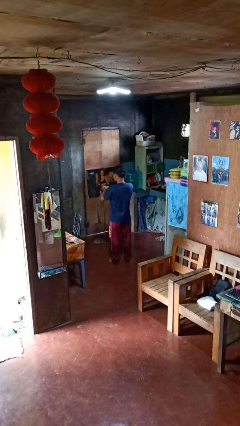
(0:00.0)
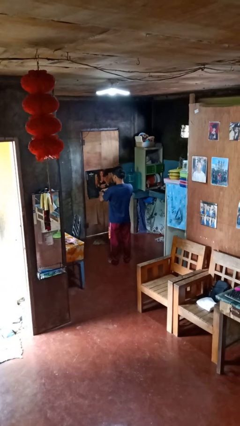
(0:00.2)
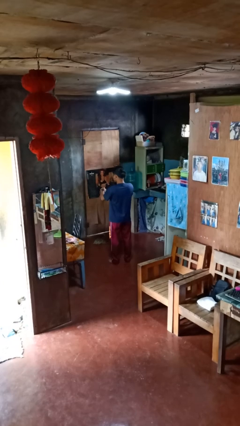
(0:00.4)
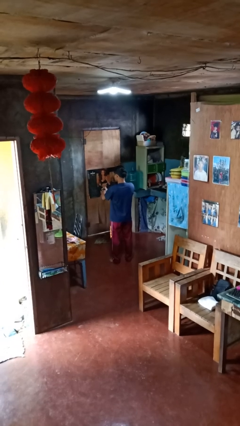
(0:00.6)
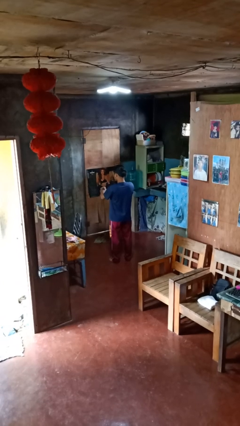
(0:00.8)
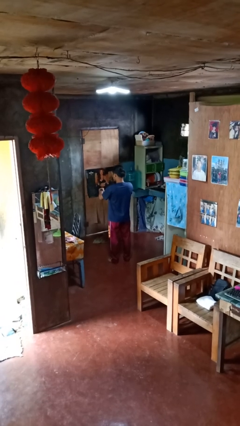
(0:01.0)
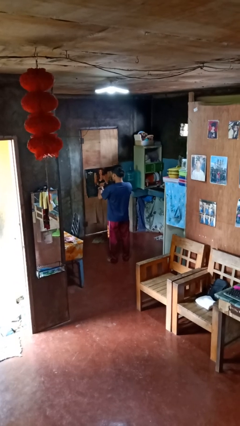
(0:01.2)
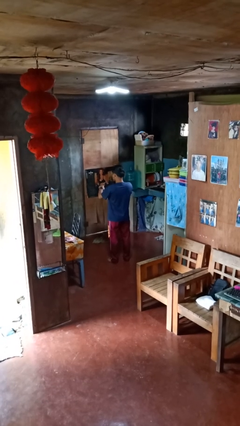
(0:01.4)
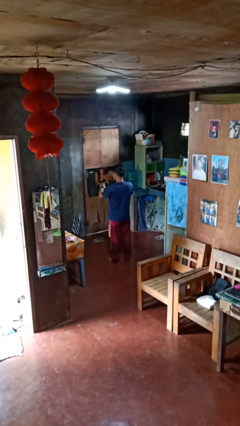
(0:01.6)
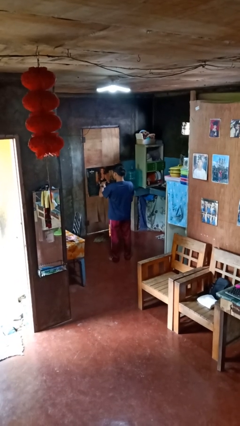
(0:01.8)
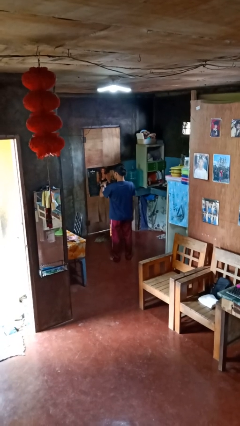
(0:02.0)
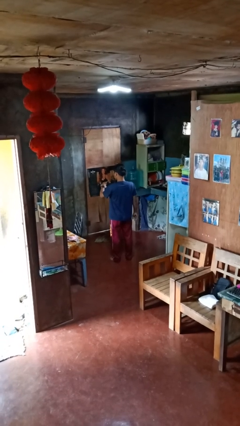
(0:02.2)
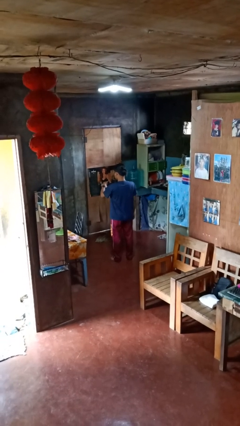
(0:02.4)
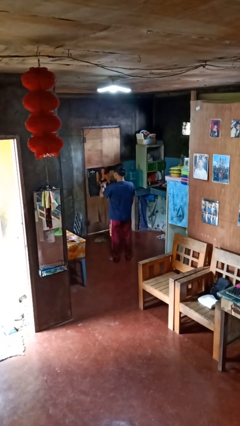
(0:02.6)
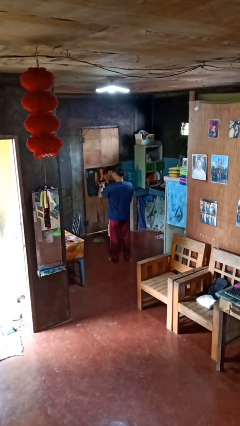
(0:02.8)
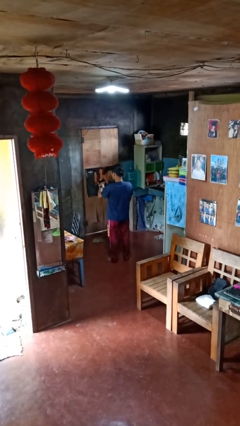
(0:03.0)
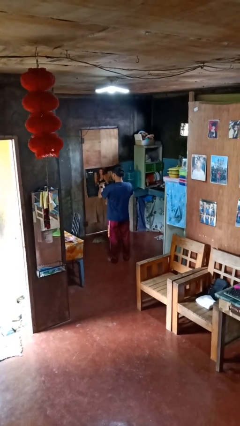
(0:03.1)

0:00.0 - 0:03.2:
person puts on wristwatch

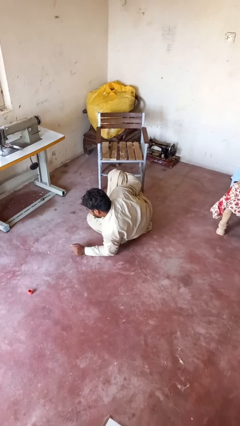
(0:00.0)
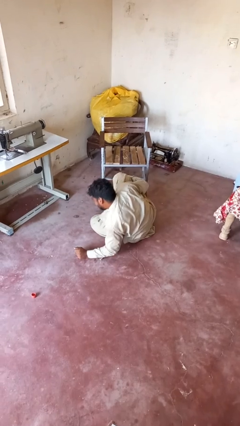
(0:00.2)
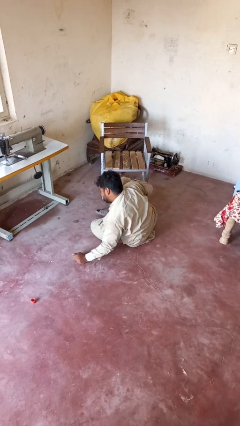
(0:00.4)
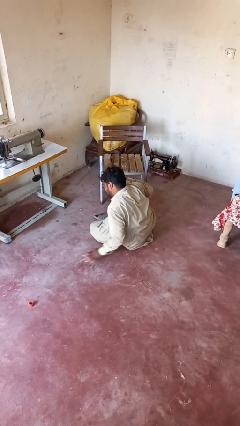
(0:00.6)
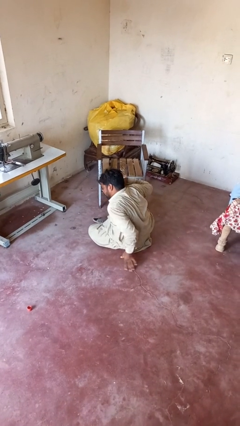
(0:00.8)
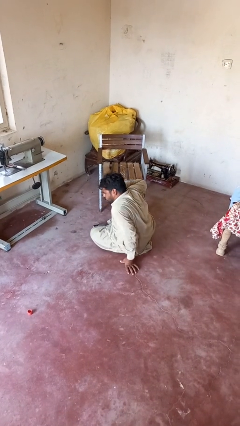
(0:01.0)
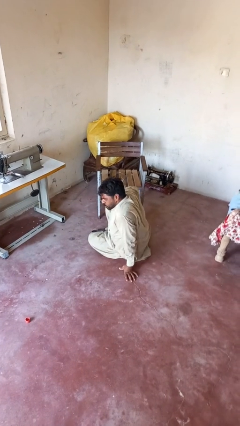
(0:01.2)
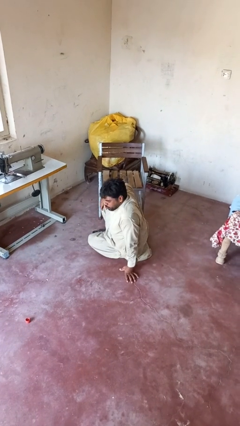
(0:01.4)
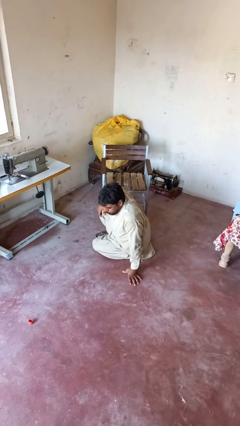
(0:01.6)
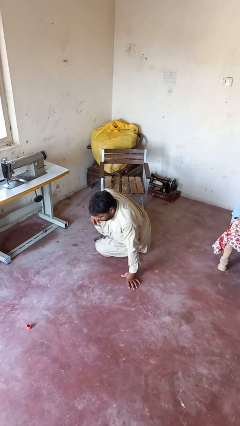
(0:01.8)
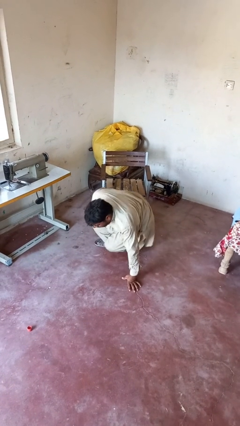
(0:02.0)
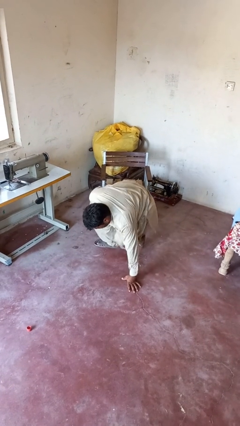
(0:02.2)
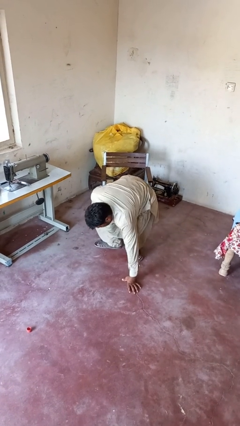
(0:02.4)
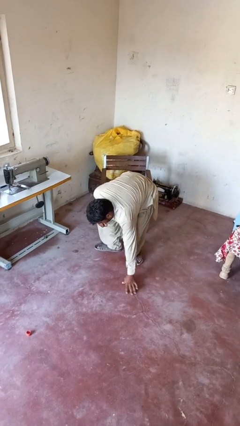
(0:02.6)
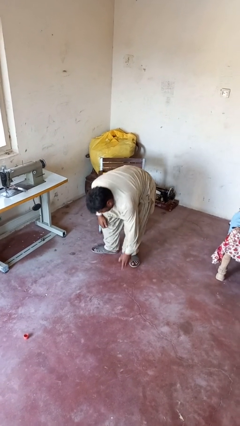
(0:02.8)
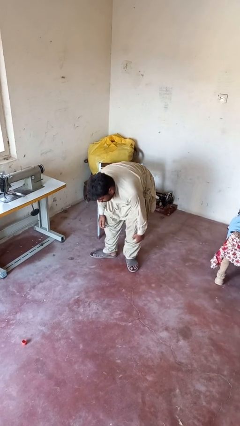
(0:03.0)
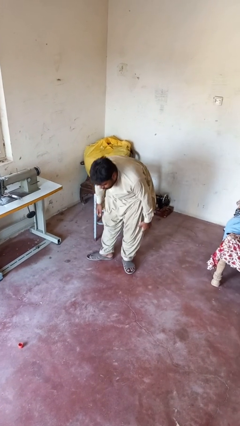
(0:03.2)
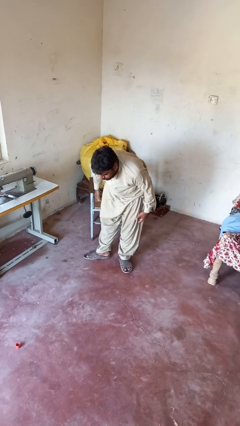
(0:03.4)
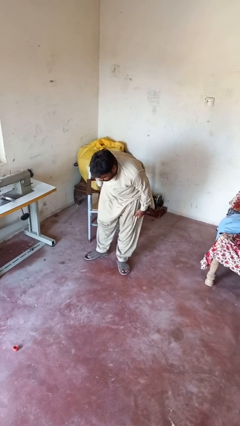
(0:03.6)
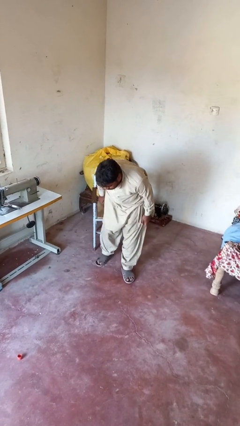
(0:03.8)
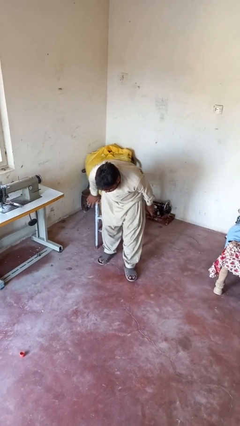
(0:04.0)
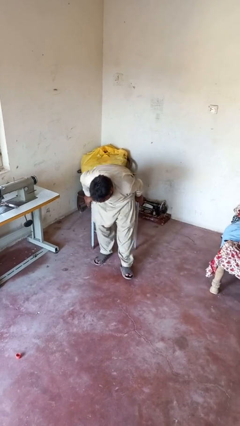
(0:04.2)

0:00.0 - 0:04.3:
person stands up from floor

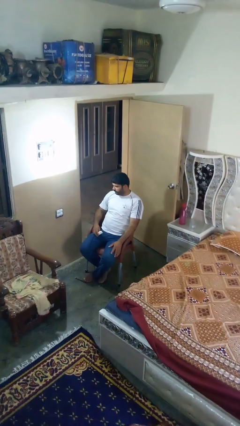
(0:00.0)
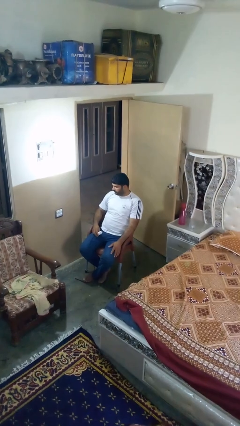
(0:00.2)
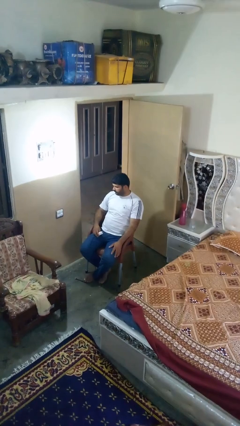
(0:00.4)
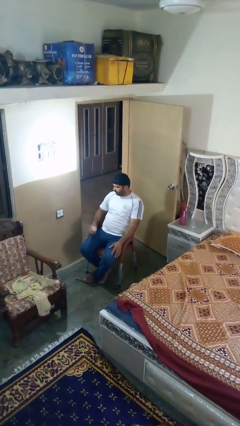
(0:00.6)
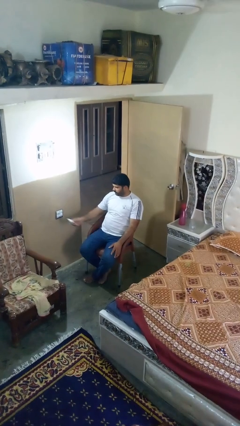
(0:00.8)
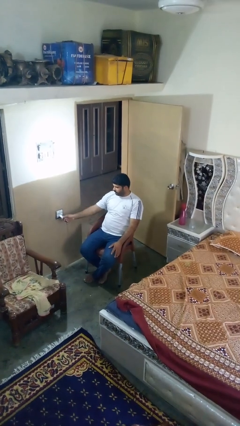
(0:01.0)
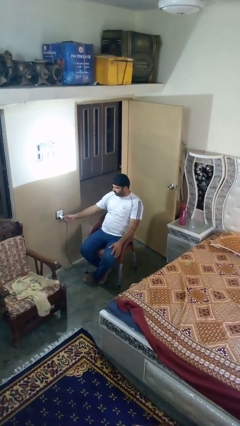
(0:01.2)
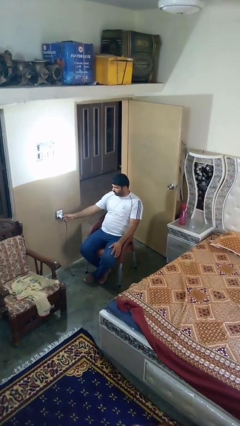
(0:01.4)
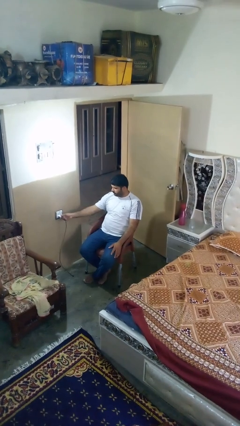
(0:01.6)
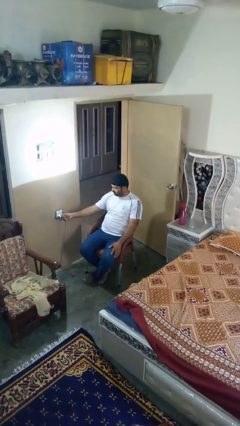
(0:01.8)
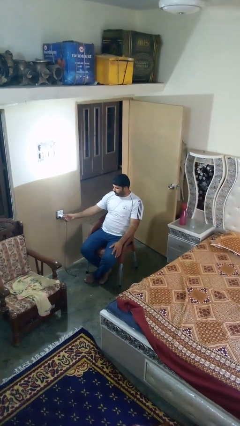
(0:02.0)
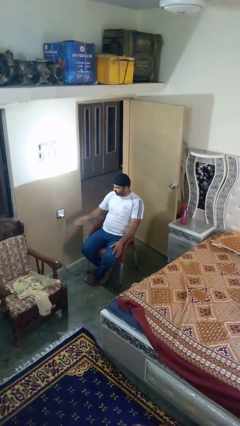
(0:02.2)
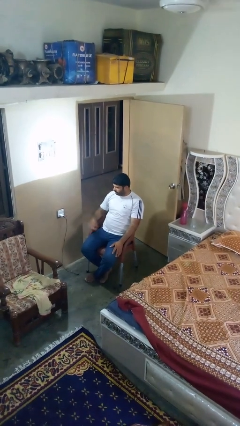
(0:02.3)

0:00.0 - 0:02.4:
person plugs into electrical socket

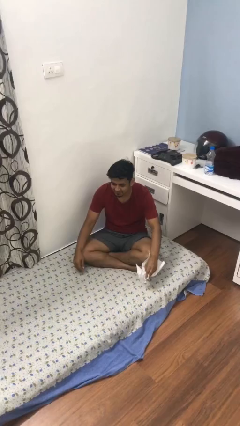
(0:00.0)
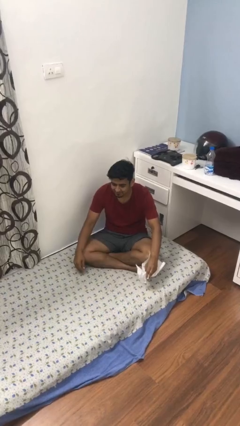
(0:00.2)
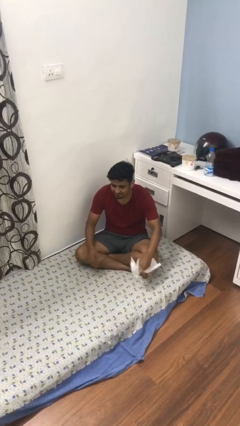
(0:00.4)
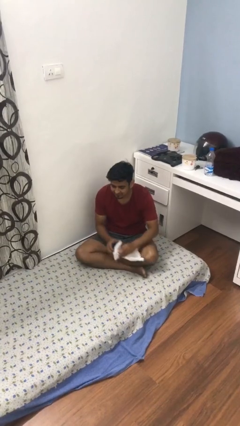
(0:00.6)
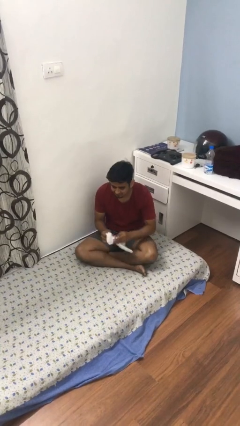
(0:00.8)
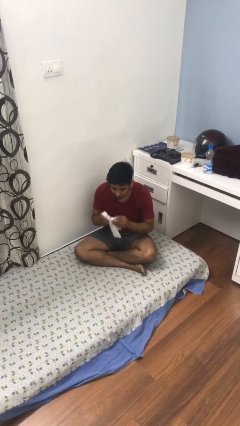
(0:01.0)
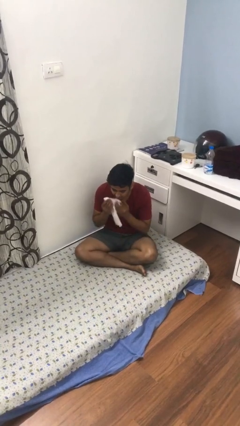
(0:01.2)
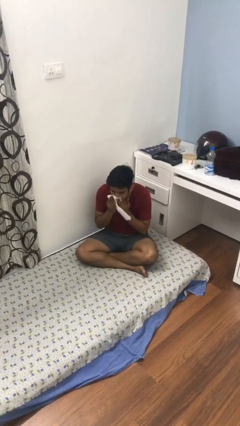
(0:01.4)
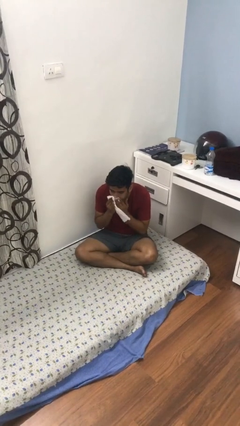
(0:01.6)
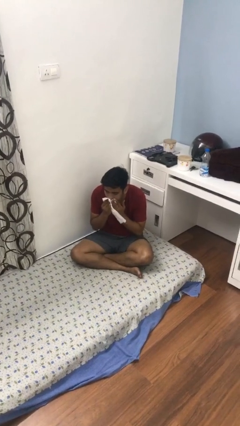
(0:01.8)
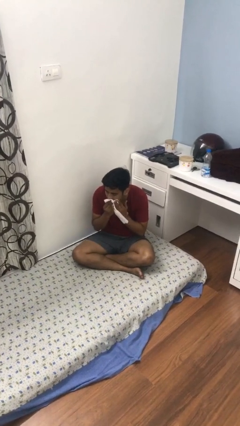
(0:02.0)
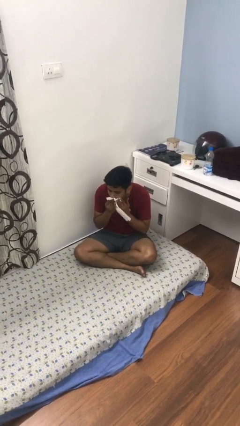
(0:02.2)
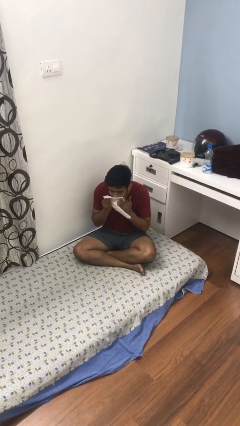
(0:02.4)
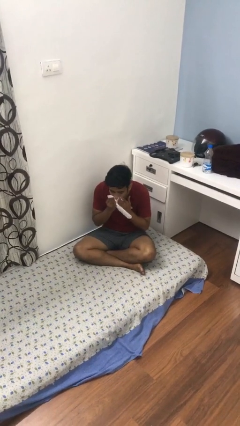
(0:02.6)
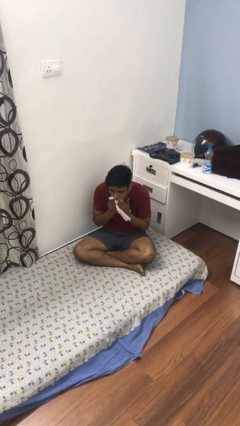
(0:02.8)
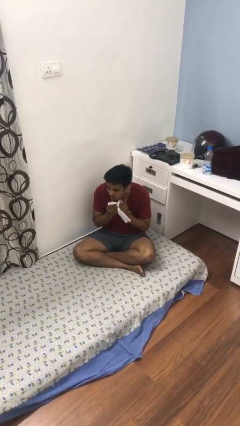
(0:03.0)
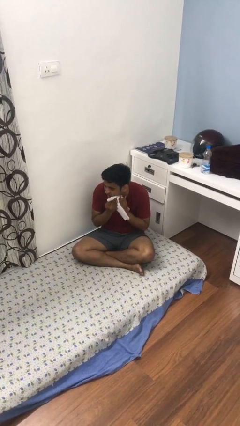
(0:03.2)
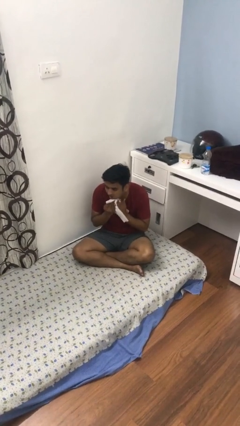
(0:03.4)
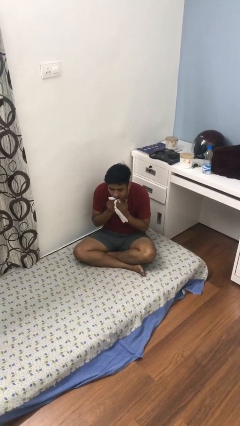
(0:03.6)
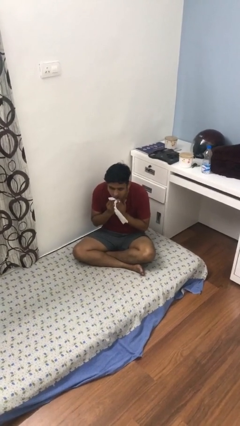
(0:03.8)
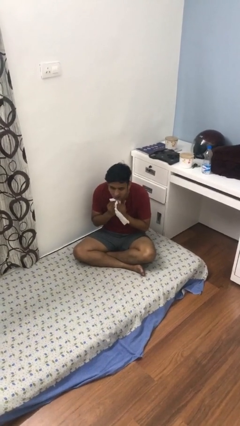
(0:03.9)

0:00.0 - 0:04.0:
person wipes mouth with napkin

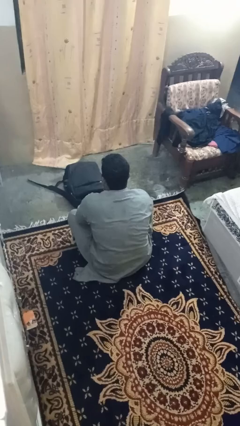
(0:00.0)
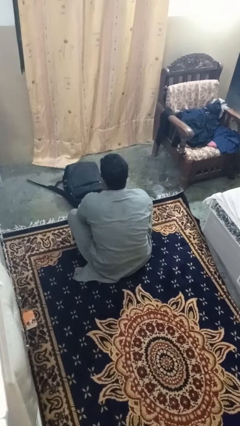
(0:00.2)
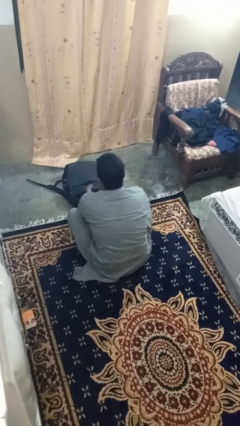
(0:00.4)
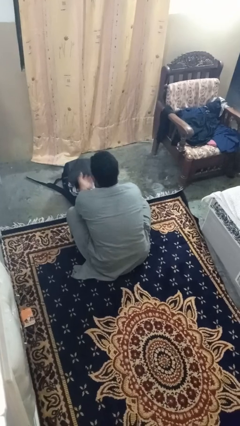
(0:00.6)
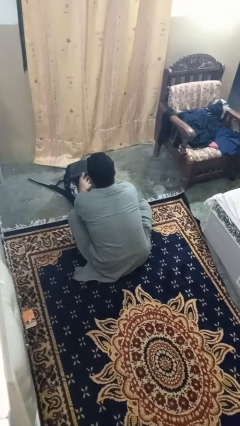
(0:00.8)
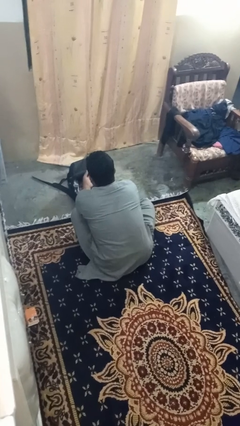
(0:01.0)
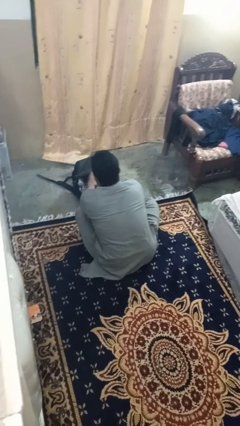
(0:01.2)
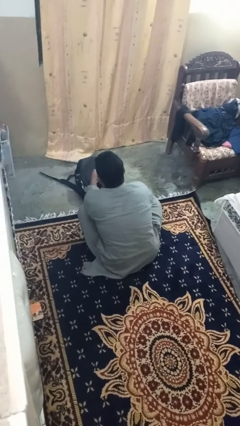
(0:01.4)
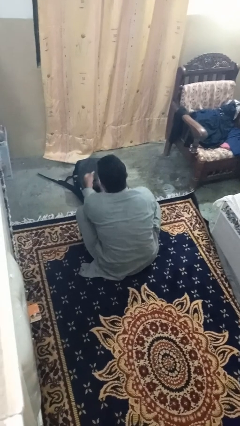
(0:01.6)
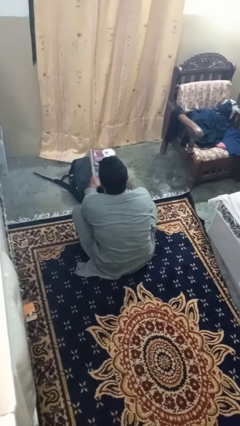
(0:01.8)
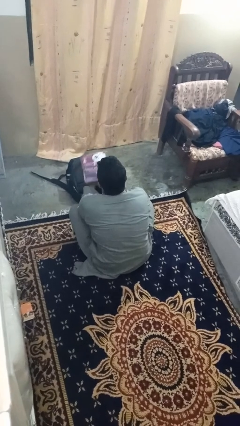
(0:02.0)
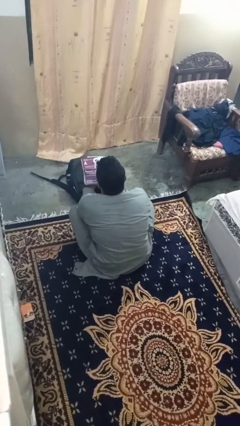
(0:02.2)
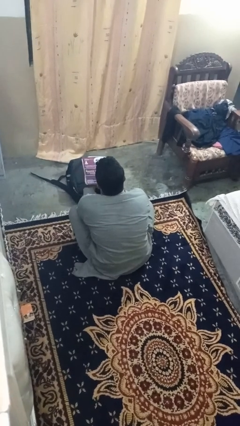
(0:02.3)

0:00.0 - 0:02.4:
person takes object from bag

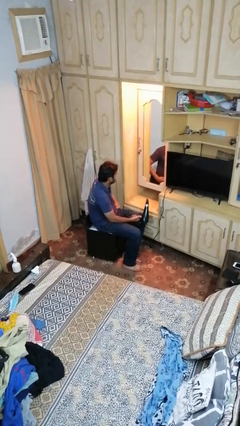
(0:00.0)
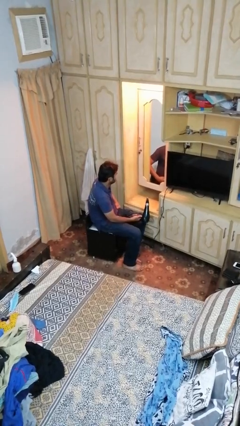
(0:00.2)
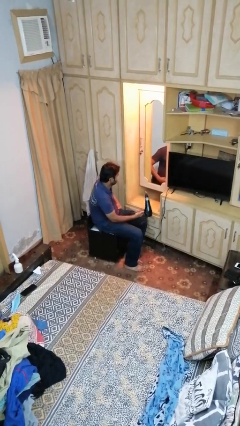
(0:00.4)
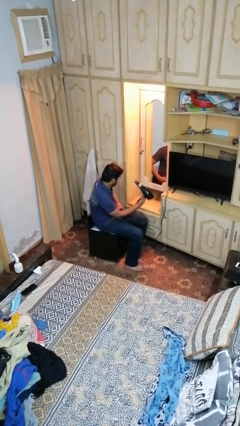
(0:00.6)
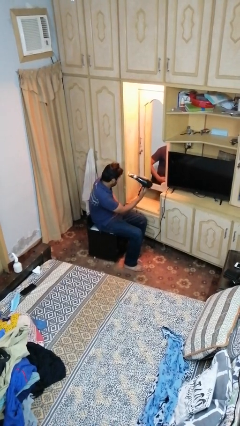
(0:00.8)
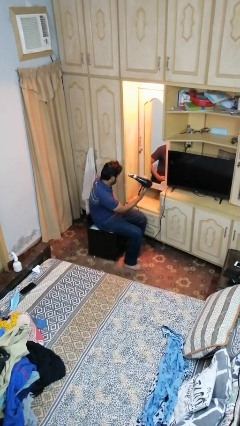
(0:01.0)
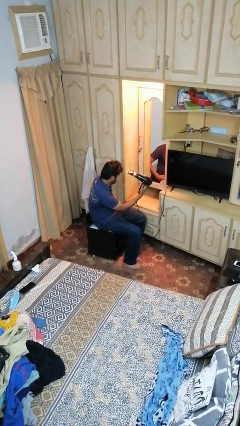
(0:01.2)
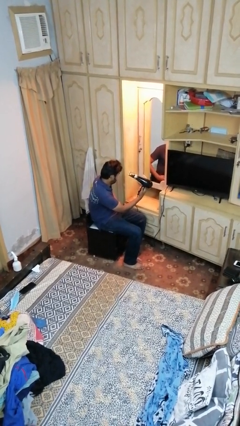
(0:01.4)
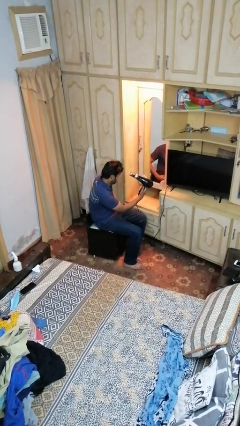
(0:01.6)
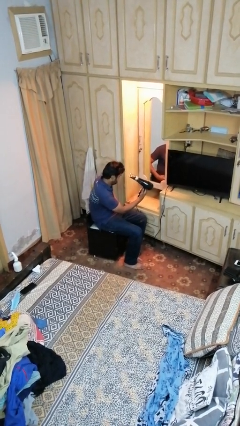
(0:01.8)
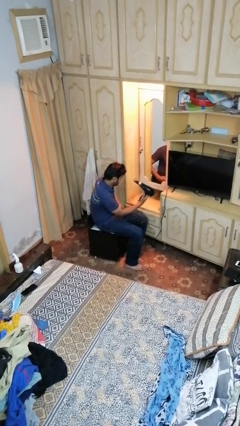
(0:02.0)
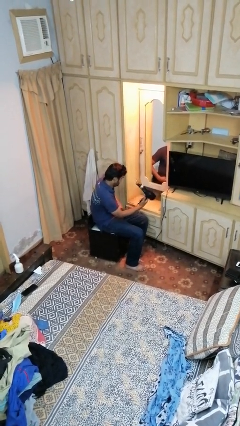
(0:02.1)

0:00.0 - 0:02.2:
person dries hair with hairdryer
